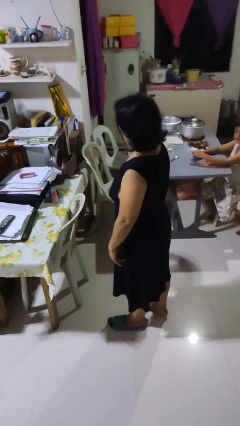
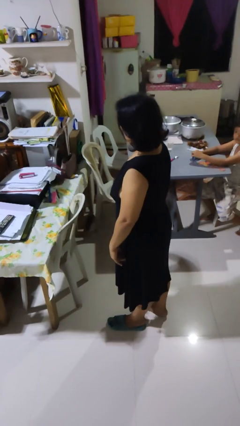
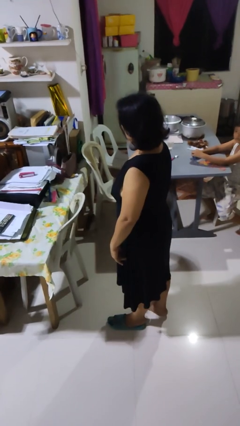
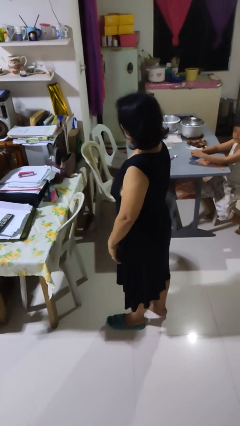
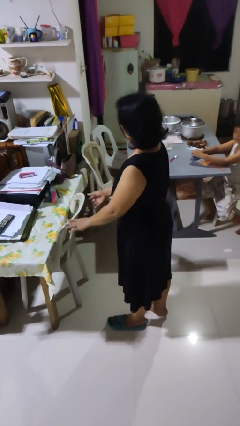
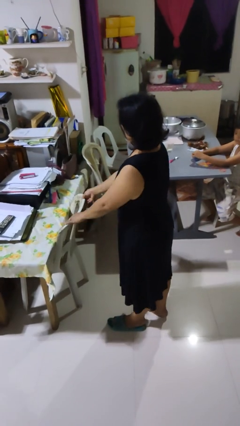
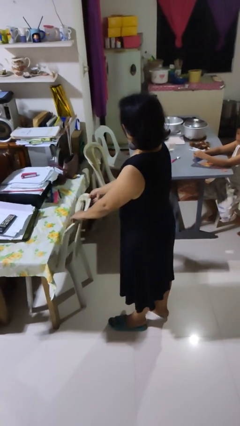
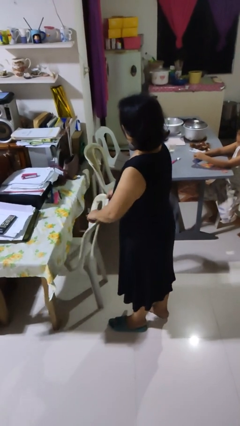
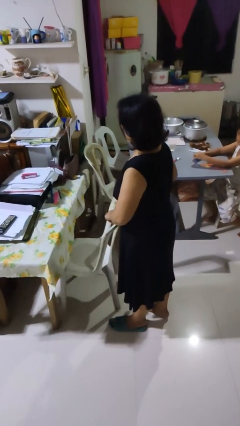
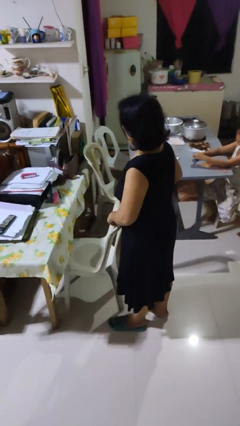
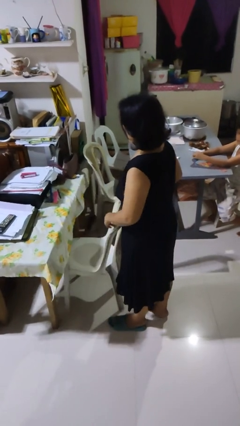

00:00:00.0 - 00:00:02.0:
person pulls out chair

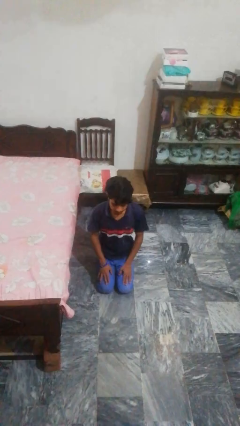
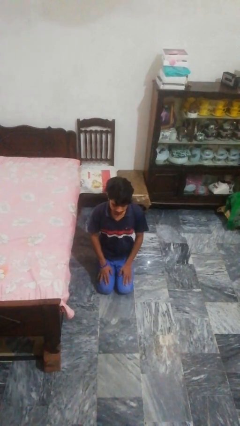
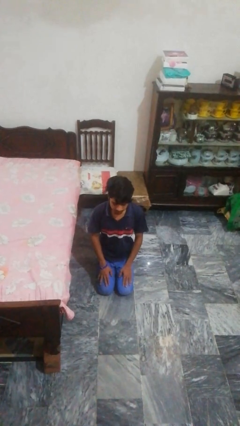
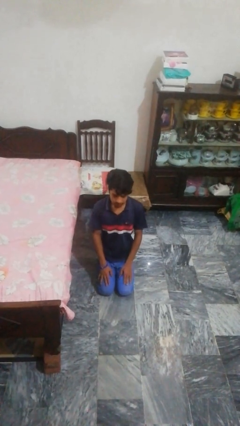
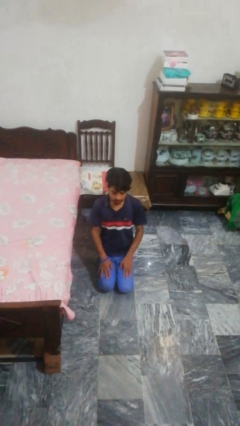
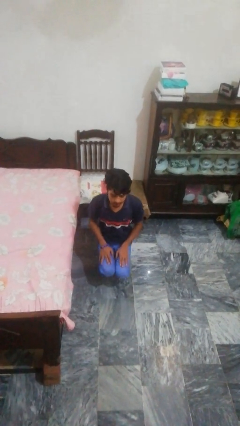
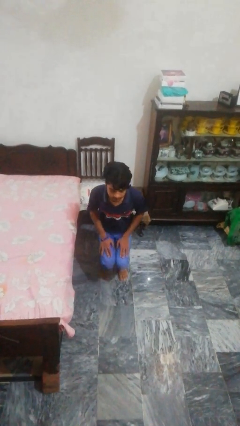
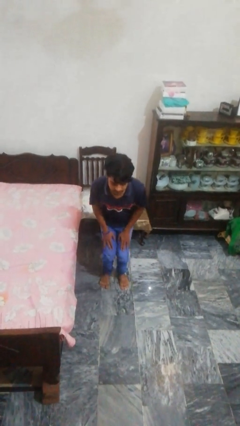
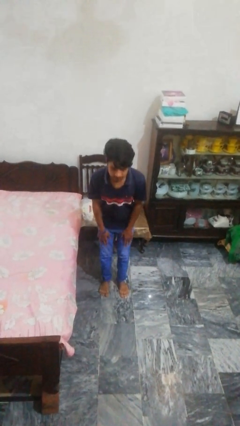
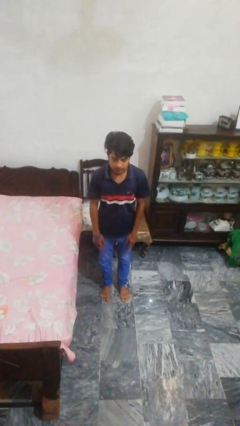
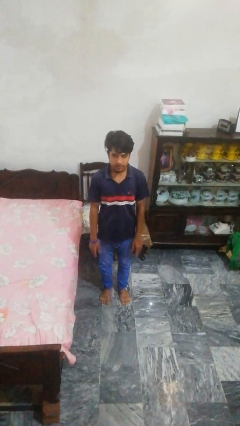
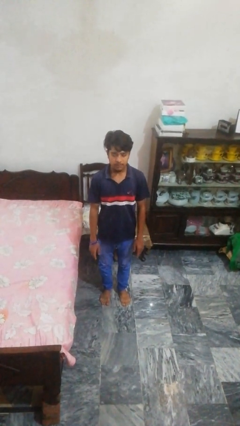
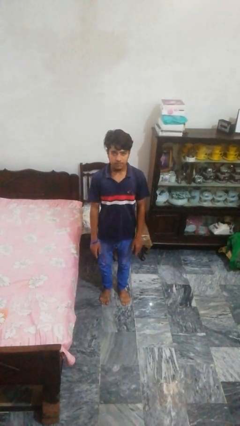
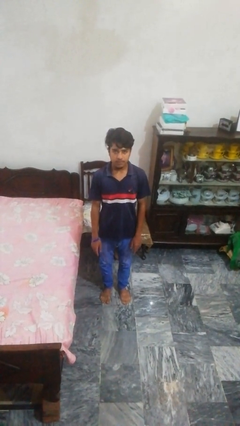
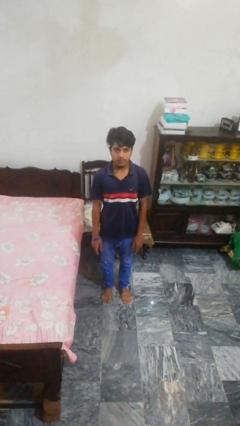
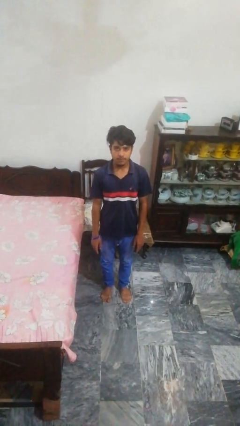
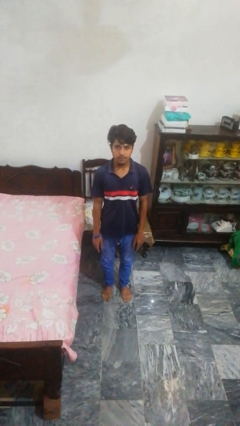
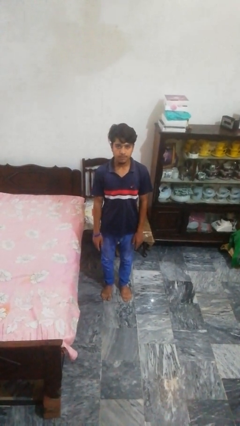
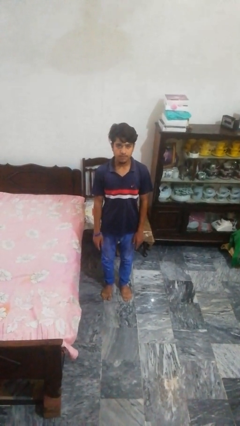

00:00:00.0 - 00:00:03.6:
person stands up from floor

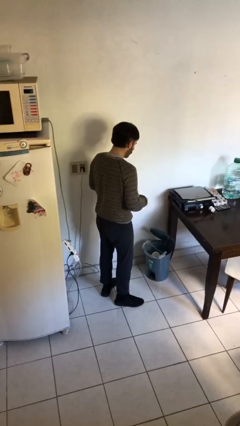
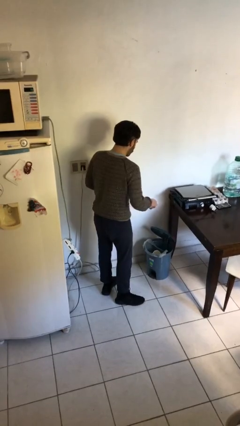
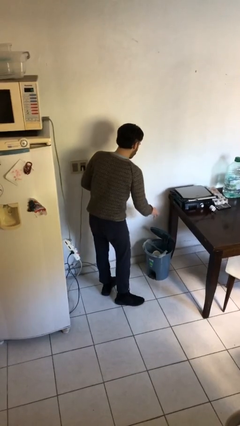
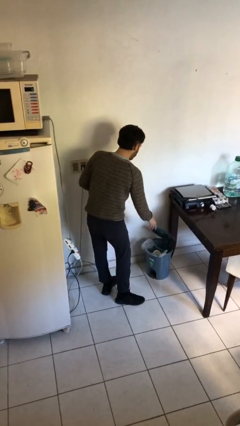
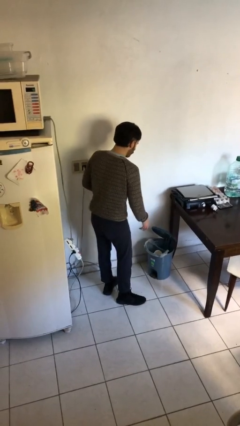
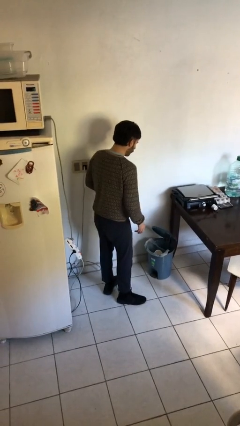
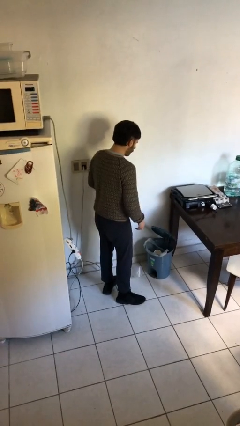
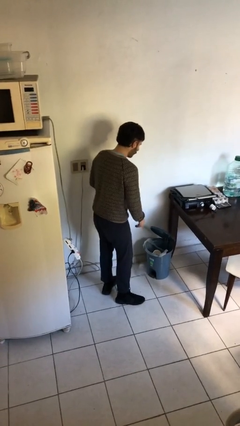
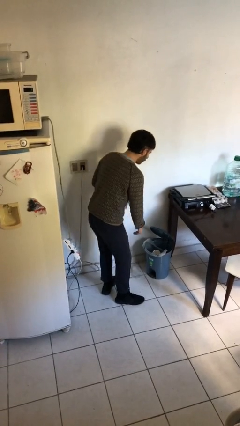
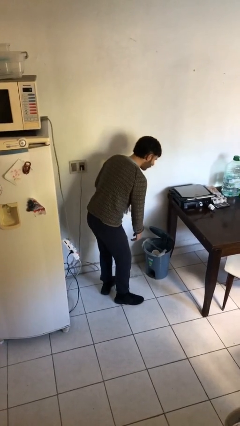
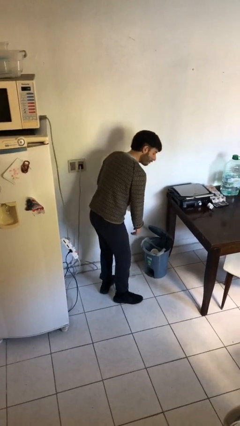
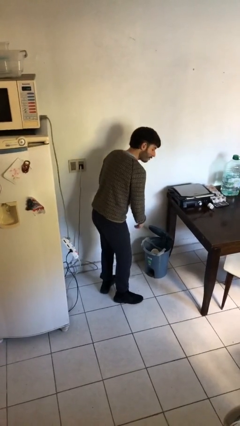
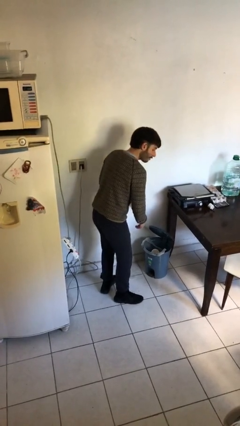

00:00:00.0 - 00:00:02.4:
person discards trash

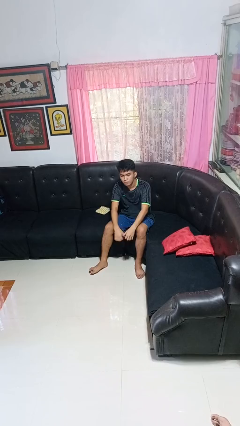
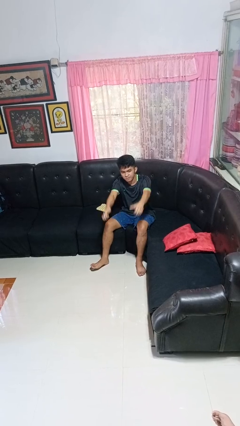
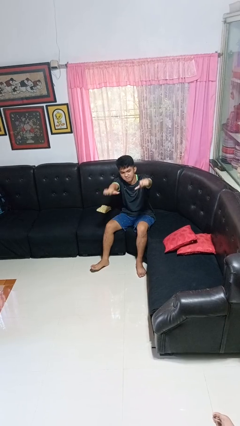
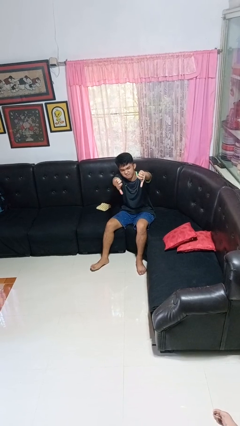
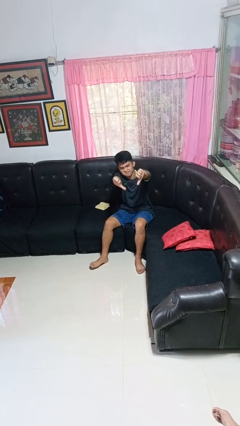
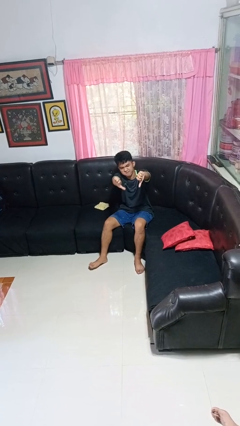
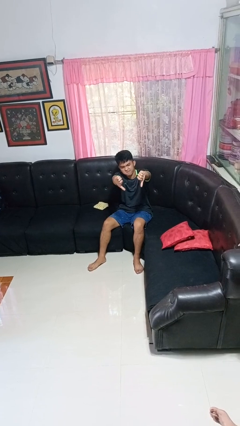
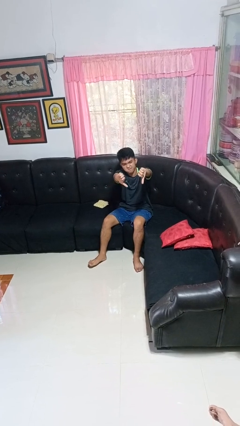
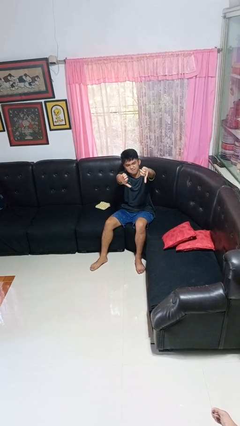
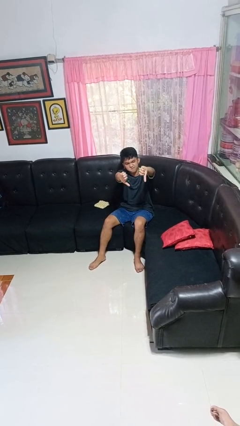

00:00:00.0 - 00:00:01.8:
person gestures thumbs down

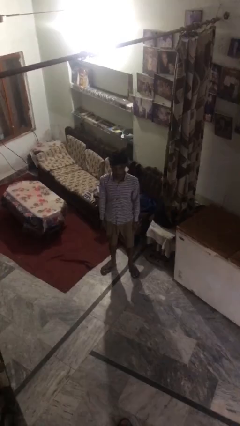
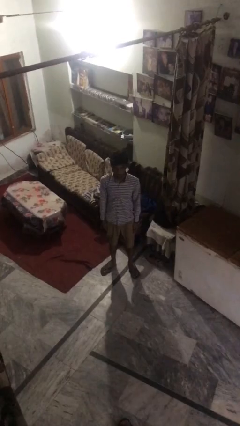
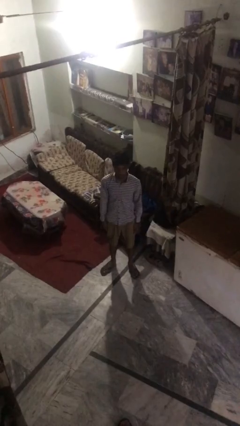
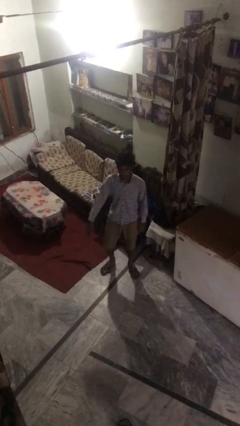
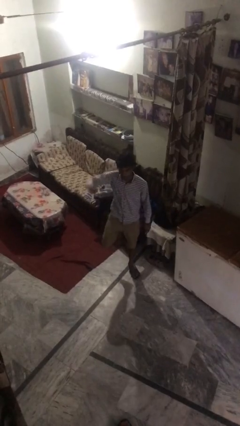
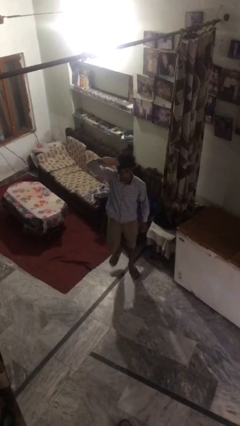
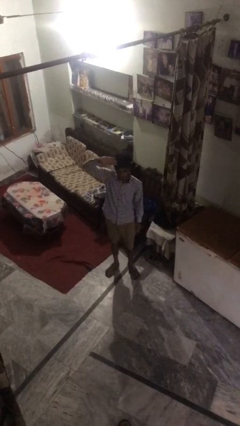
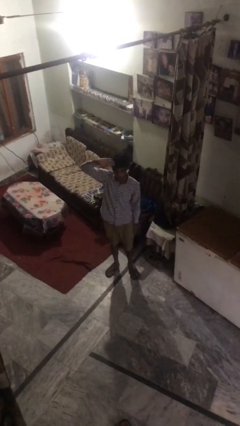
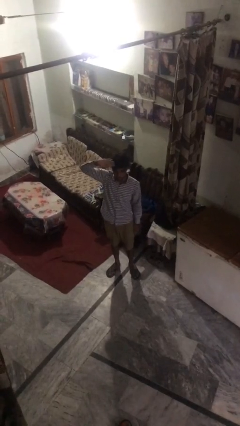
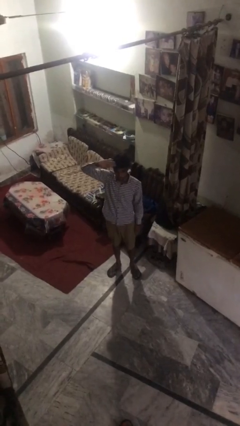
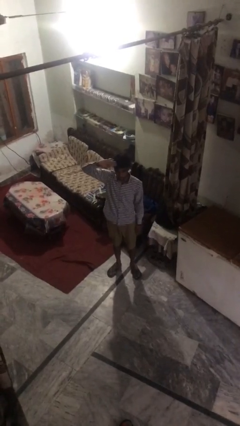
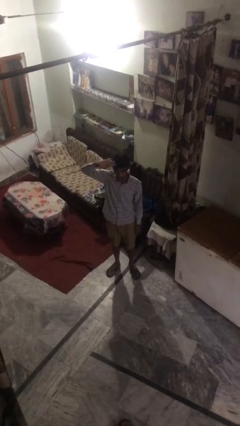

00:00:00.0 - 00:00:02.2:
person salutes

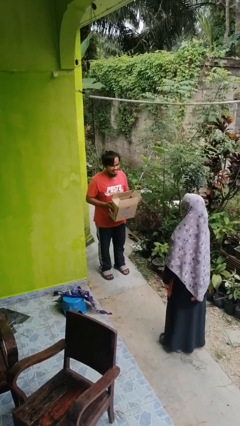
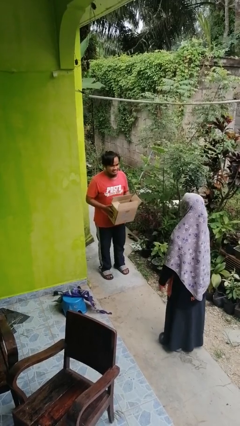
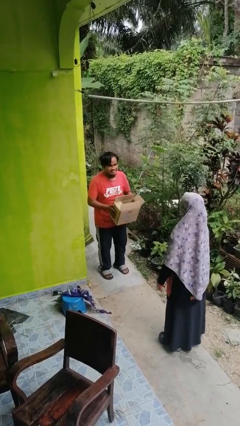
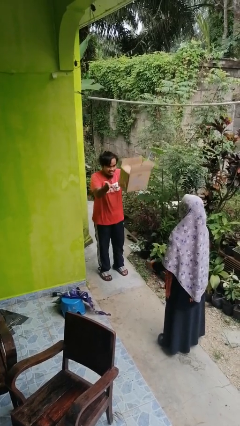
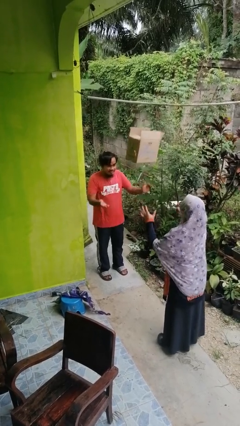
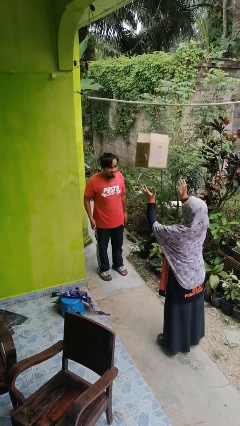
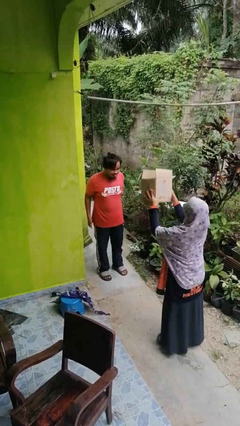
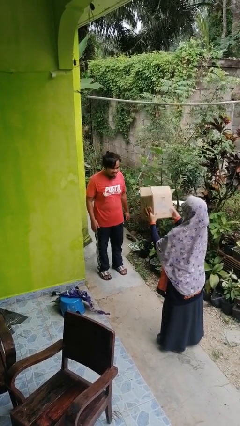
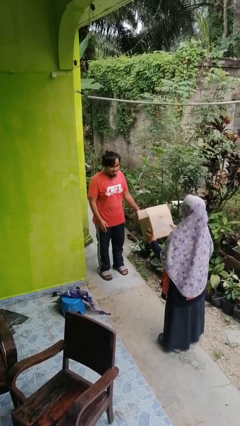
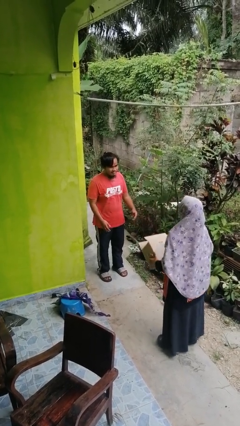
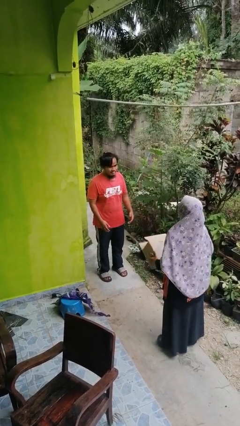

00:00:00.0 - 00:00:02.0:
person throws object to person

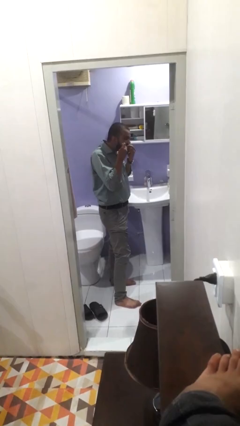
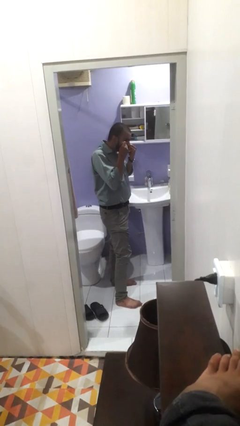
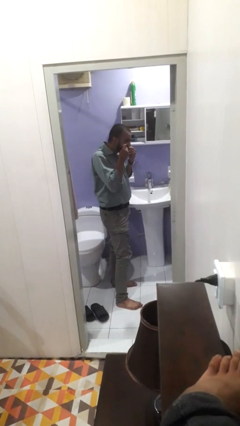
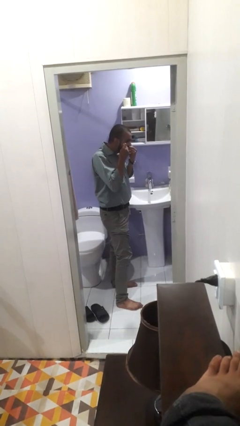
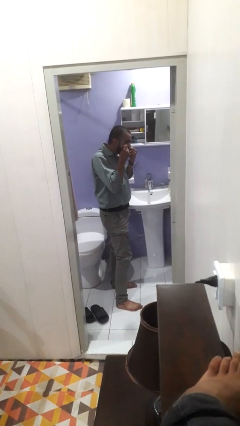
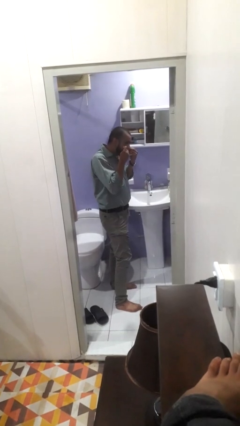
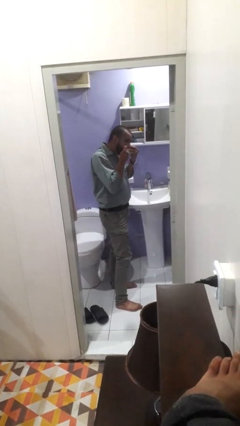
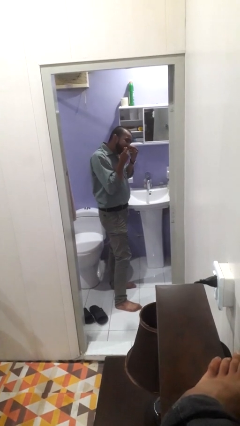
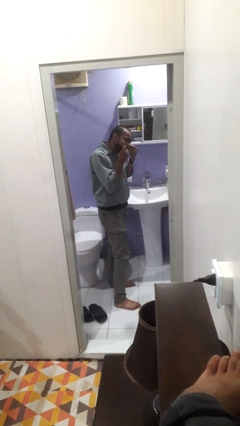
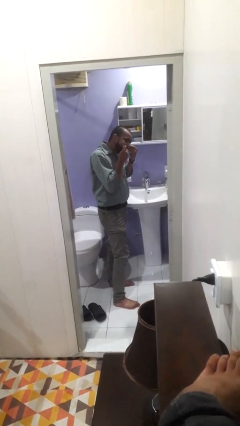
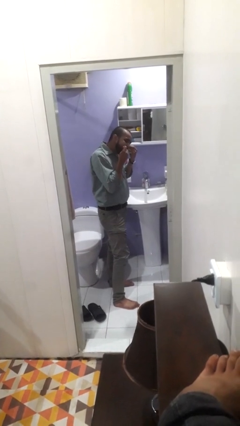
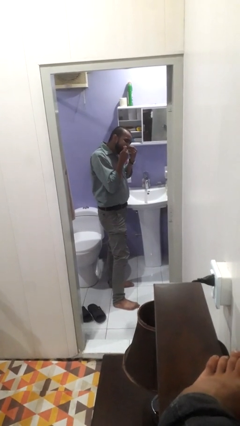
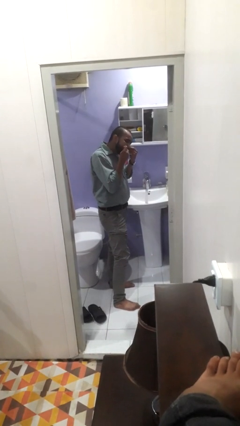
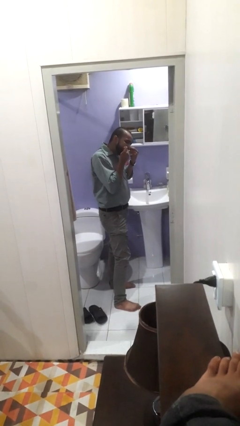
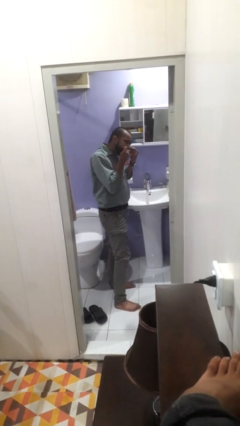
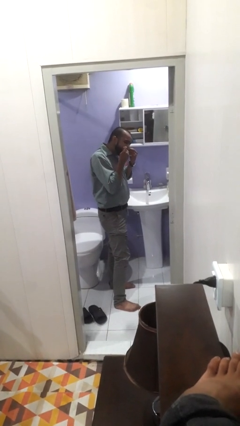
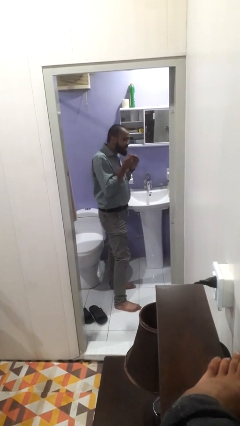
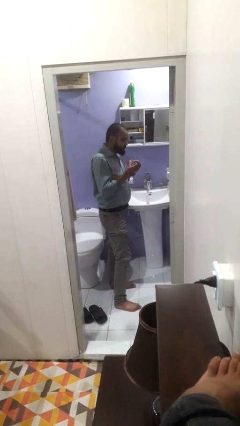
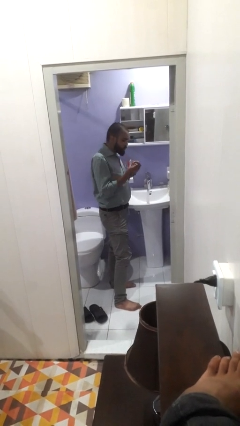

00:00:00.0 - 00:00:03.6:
person flosses
